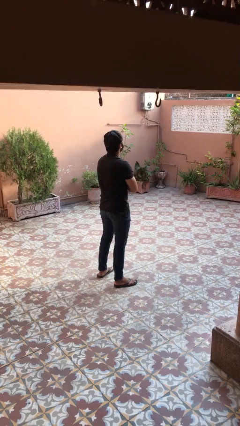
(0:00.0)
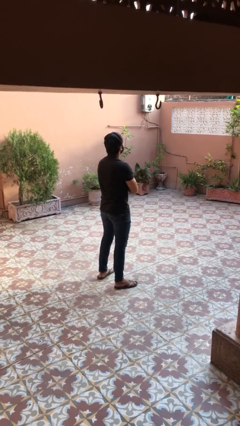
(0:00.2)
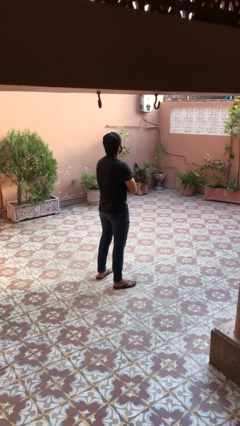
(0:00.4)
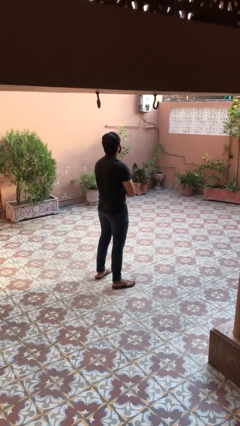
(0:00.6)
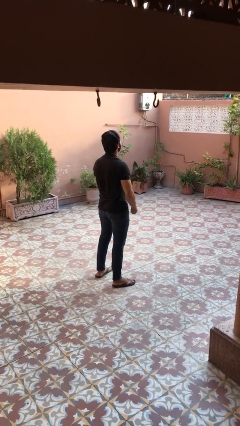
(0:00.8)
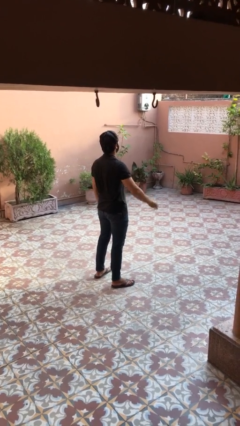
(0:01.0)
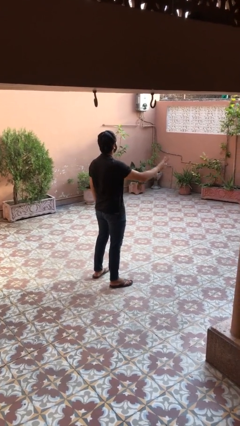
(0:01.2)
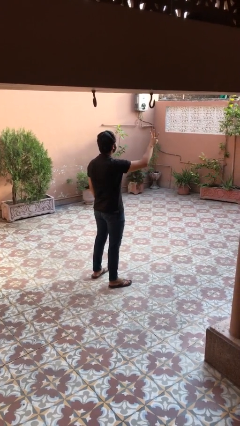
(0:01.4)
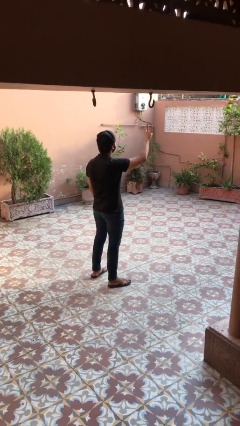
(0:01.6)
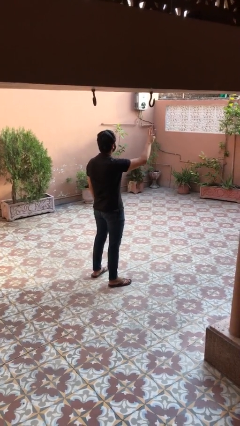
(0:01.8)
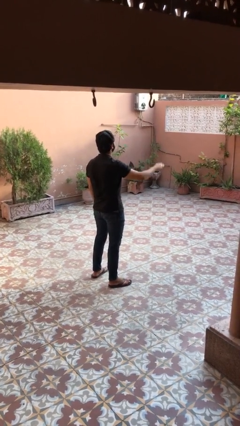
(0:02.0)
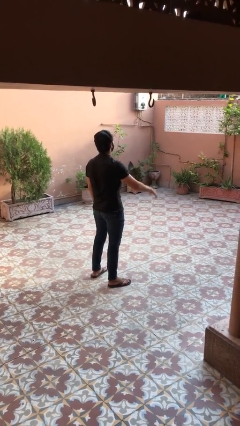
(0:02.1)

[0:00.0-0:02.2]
person gestures number three

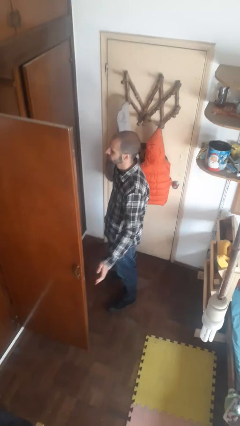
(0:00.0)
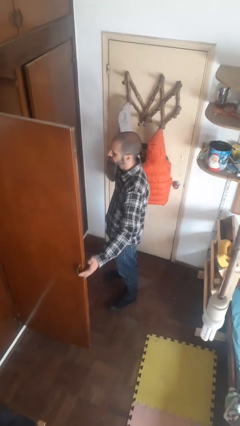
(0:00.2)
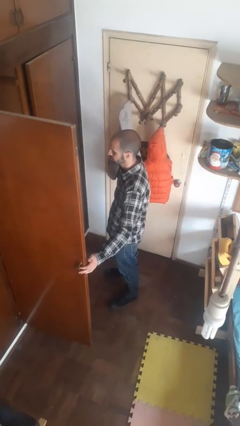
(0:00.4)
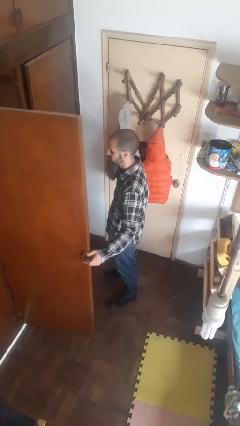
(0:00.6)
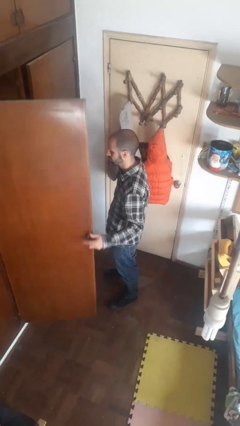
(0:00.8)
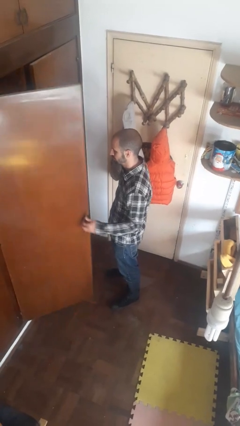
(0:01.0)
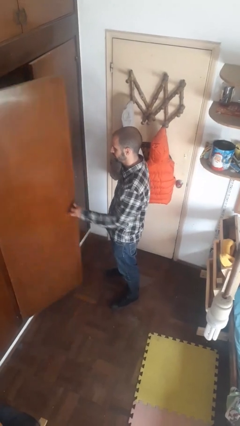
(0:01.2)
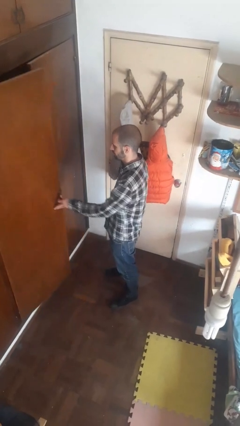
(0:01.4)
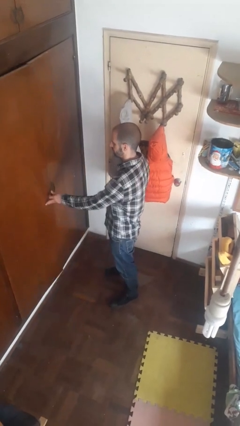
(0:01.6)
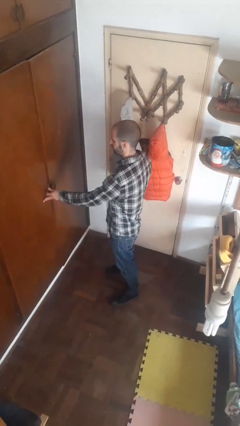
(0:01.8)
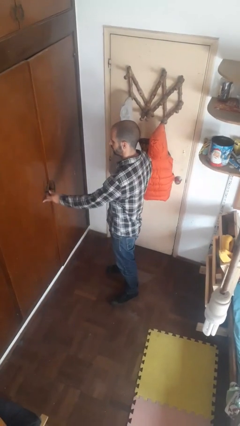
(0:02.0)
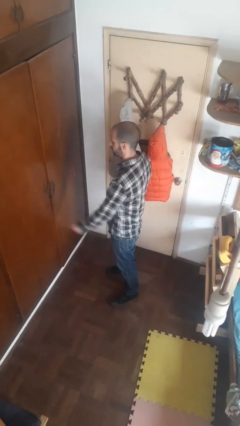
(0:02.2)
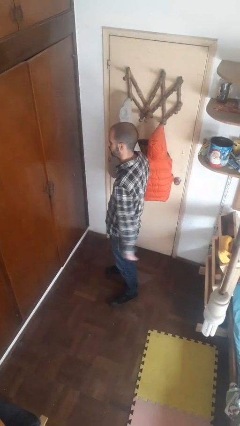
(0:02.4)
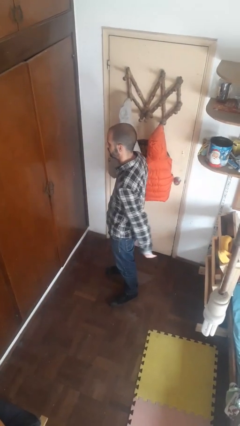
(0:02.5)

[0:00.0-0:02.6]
person closes closet door

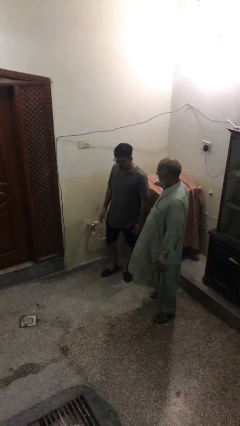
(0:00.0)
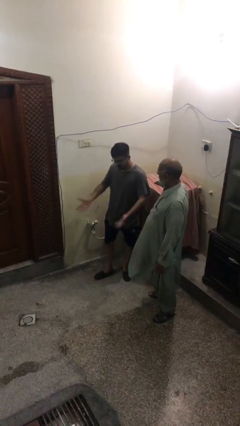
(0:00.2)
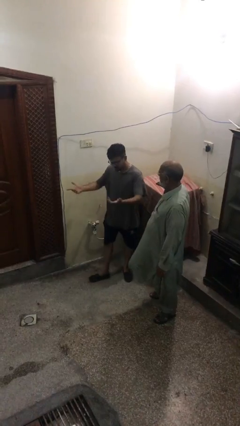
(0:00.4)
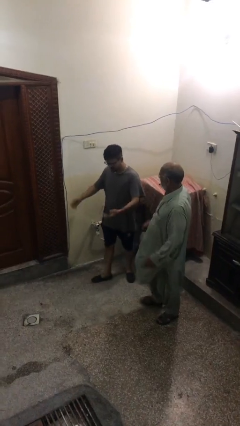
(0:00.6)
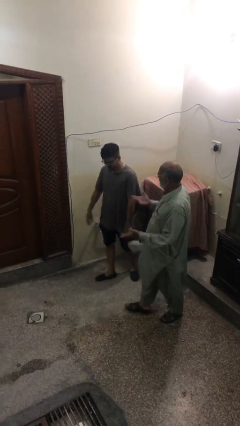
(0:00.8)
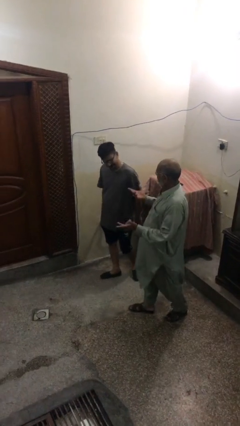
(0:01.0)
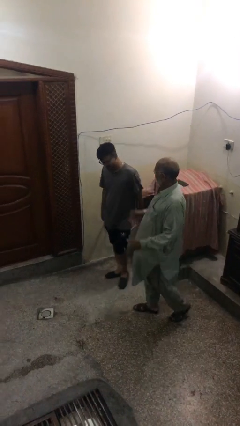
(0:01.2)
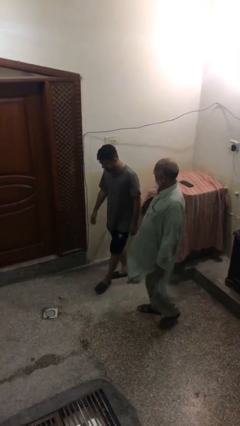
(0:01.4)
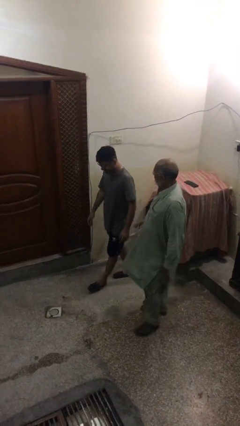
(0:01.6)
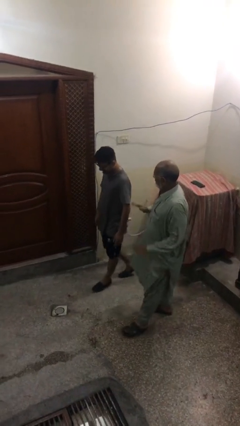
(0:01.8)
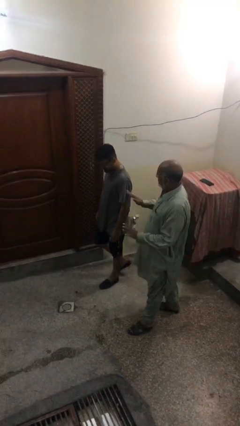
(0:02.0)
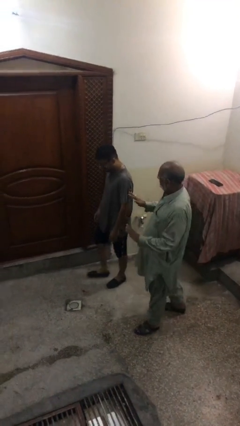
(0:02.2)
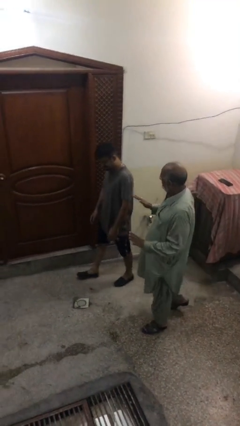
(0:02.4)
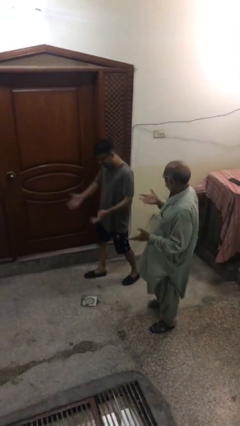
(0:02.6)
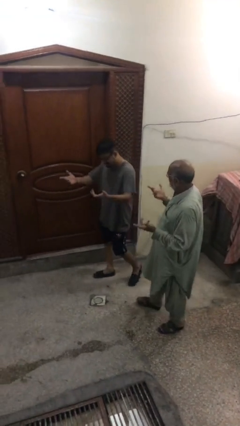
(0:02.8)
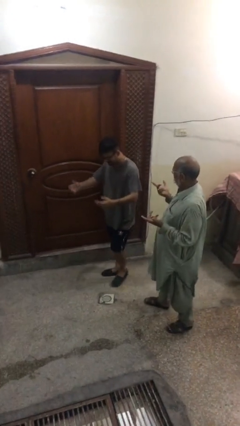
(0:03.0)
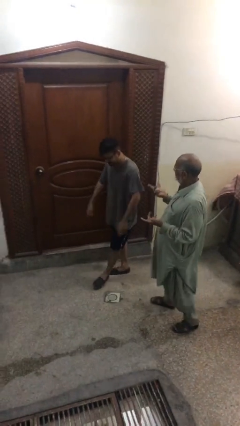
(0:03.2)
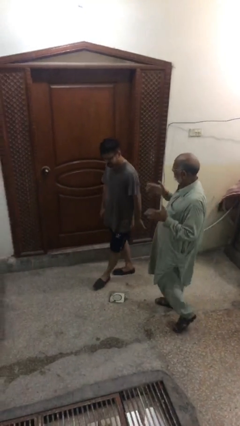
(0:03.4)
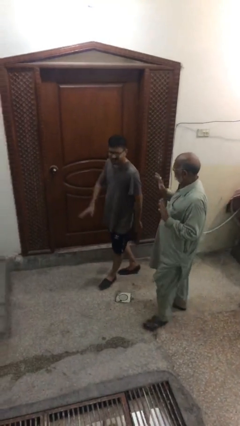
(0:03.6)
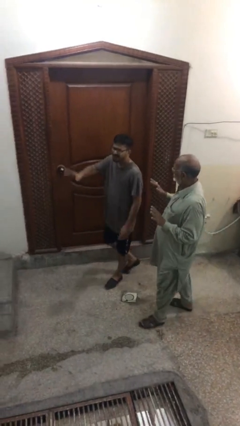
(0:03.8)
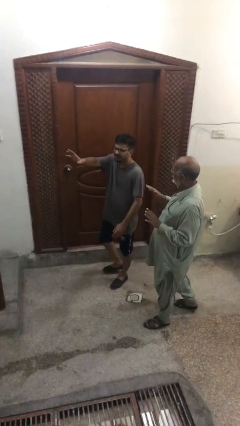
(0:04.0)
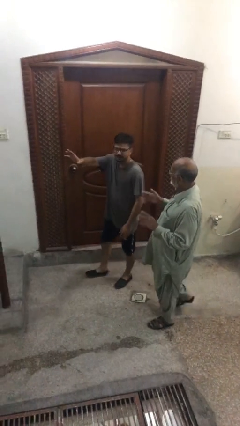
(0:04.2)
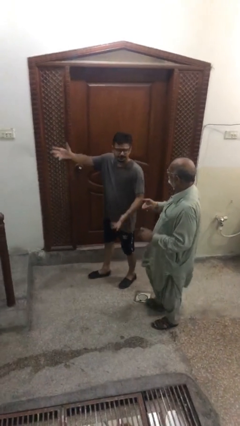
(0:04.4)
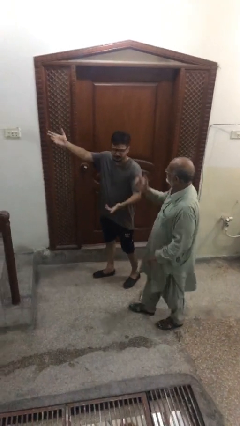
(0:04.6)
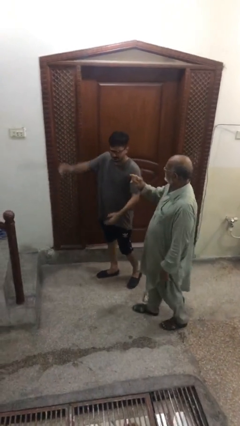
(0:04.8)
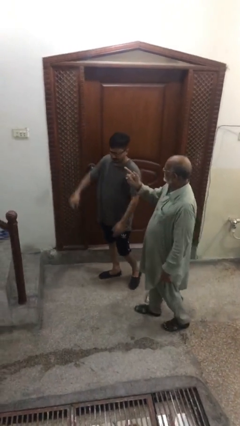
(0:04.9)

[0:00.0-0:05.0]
person talks to person

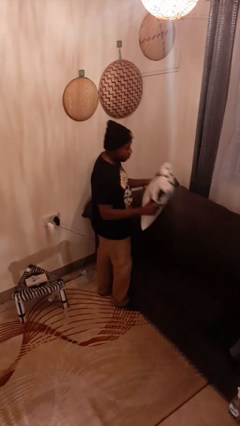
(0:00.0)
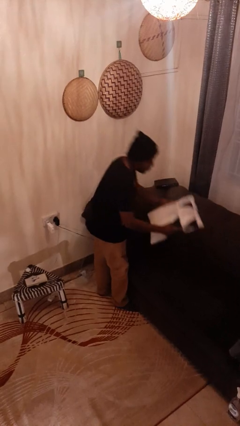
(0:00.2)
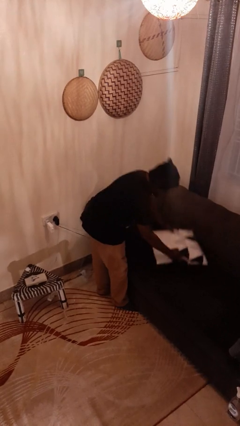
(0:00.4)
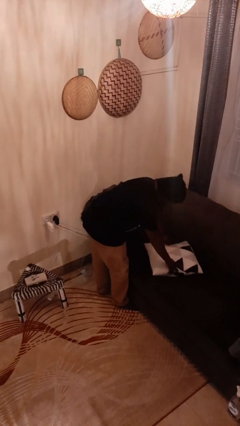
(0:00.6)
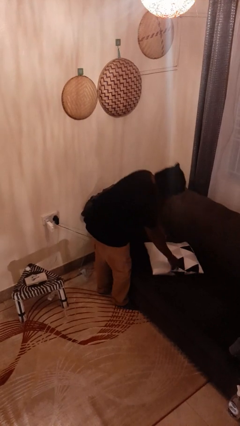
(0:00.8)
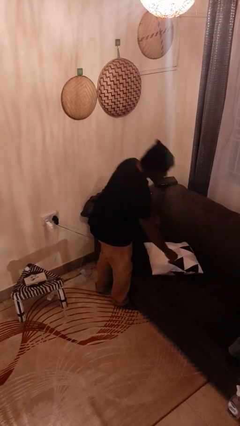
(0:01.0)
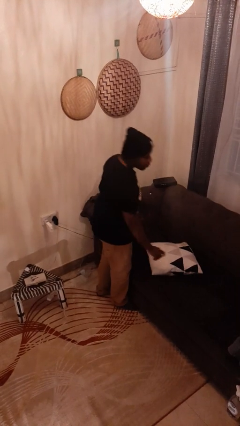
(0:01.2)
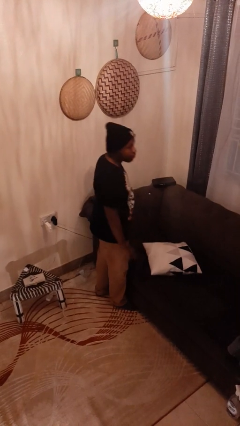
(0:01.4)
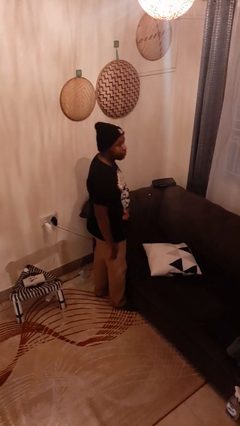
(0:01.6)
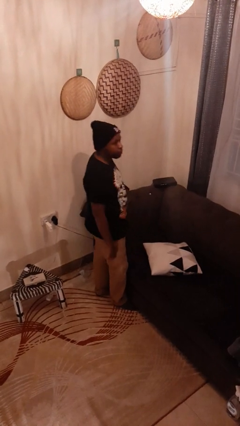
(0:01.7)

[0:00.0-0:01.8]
person puts down object on couch

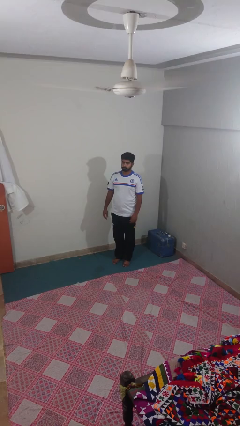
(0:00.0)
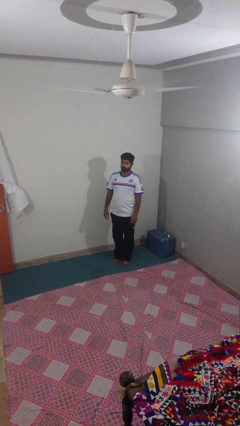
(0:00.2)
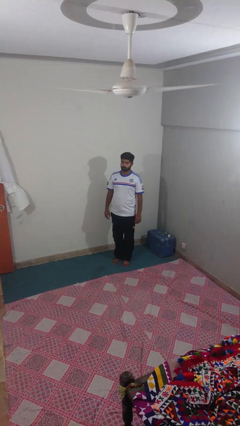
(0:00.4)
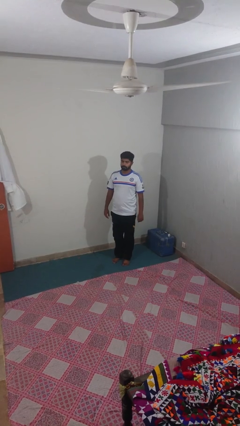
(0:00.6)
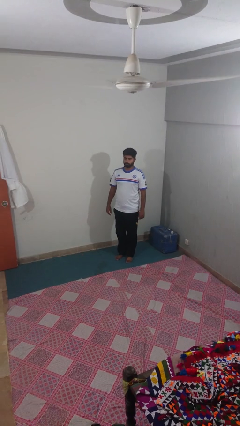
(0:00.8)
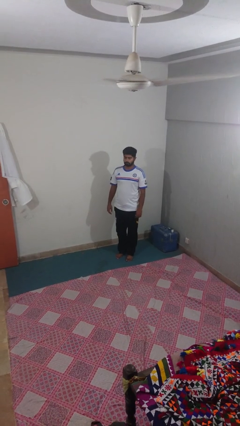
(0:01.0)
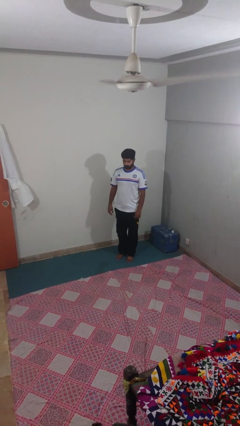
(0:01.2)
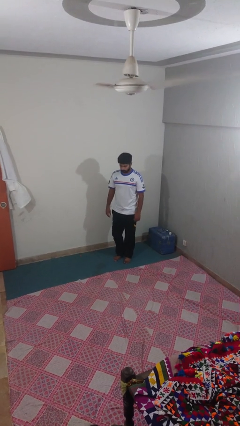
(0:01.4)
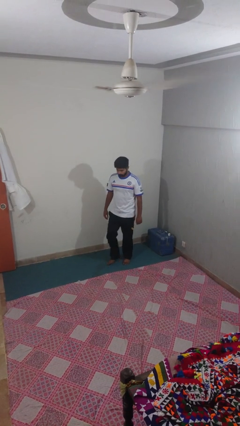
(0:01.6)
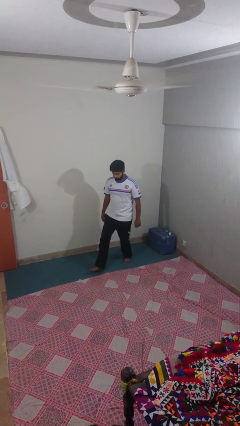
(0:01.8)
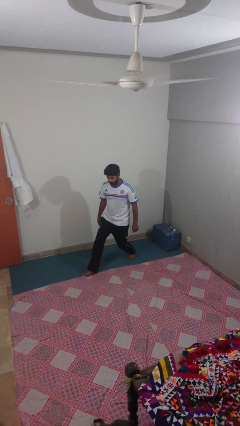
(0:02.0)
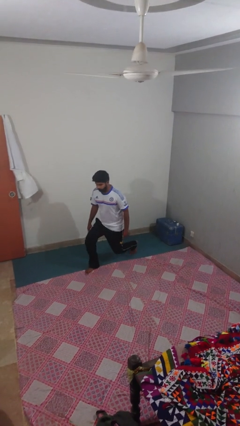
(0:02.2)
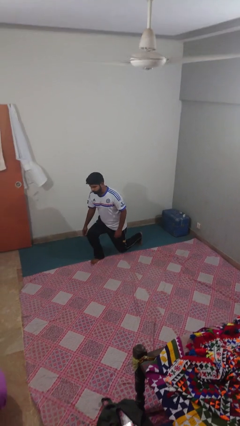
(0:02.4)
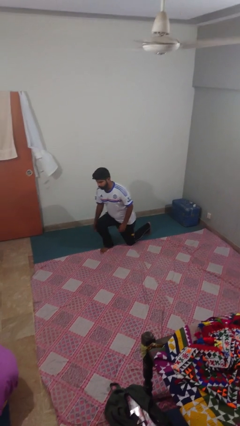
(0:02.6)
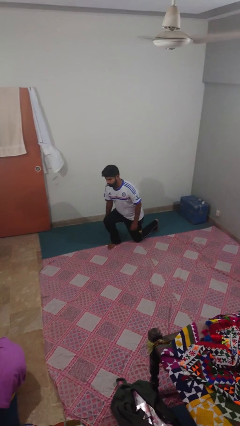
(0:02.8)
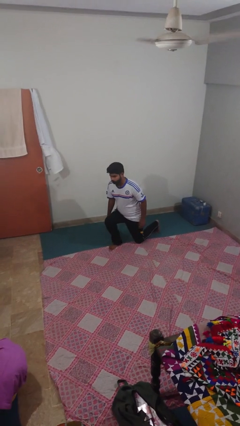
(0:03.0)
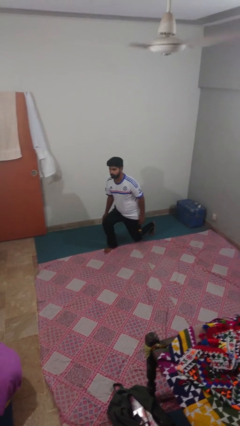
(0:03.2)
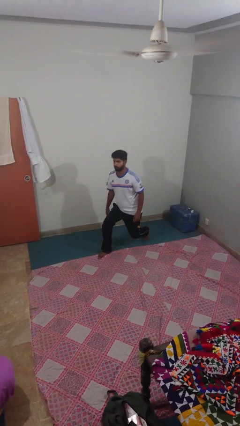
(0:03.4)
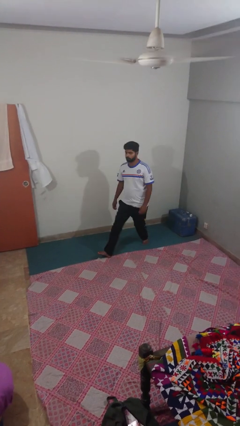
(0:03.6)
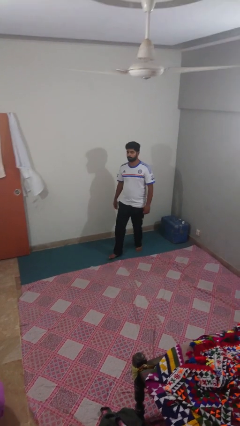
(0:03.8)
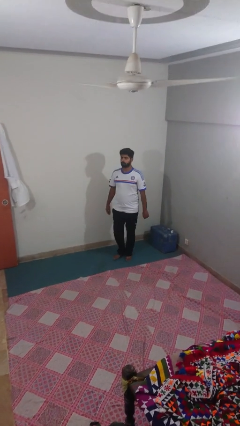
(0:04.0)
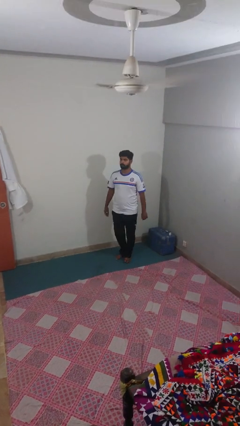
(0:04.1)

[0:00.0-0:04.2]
person exercises with lunges

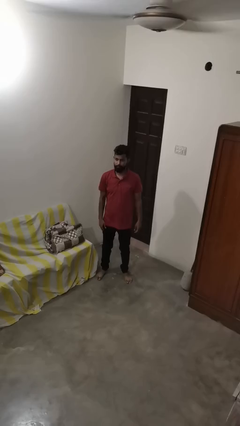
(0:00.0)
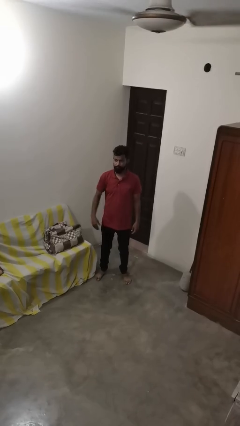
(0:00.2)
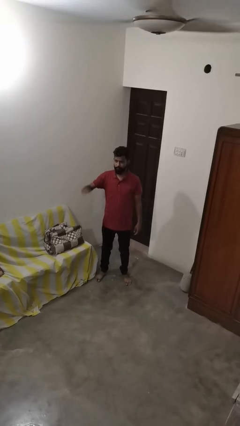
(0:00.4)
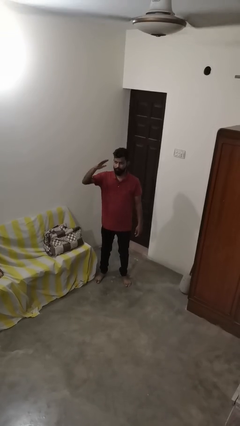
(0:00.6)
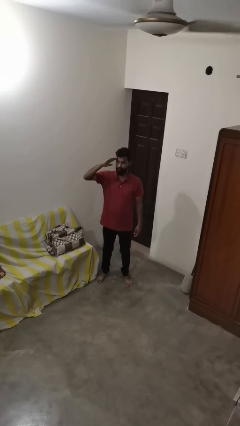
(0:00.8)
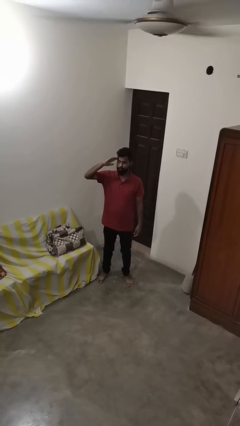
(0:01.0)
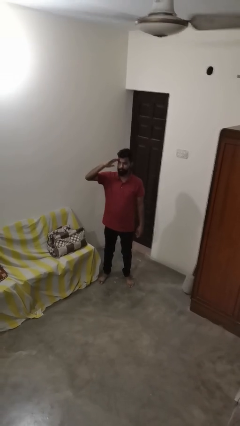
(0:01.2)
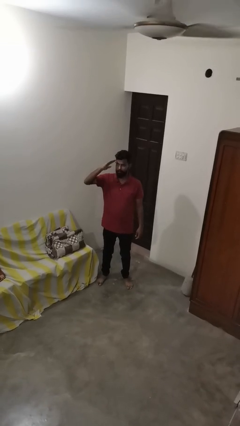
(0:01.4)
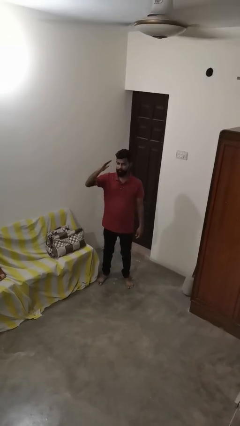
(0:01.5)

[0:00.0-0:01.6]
person salutes
